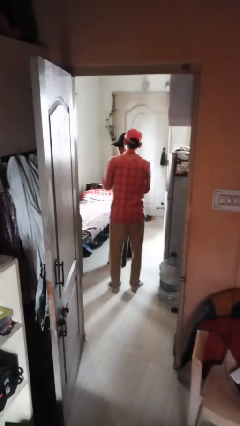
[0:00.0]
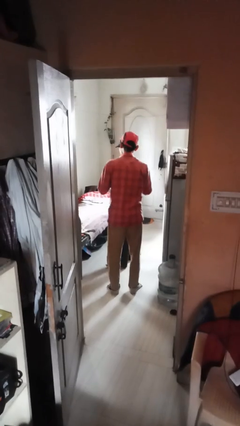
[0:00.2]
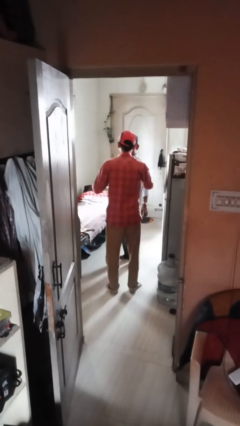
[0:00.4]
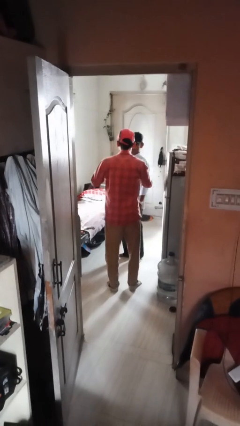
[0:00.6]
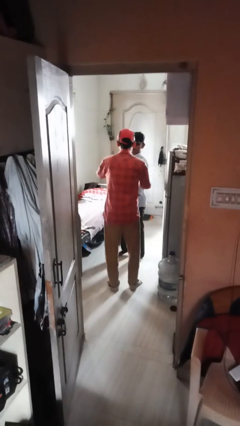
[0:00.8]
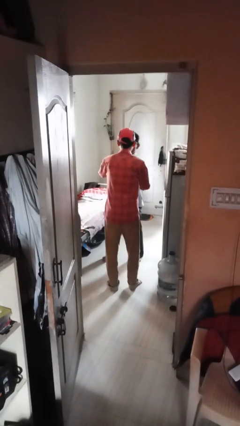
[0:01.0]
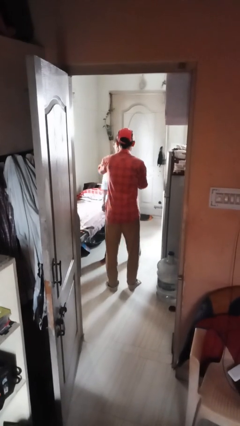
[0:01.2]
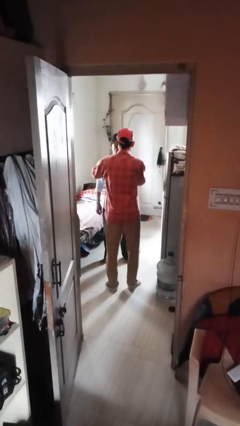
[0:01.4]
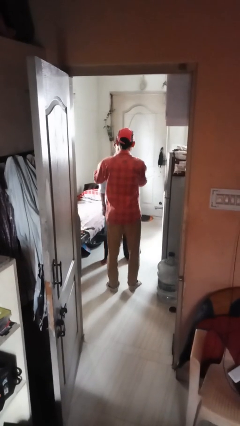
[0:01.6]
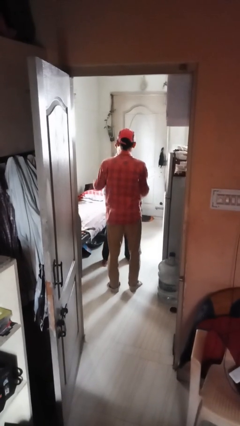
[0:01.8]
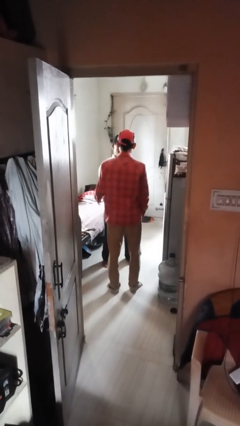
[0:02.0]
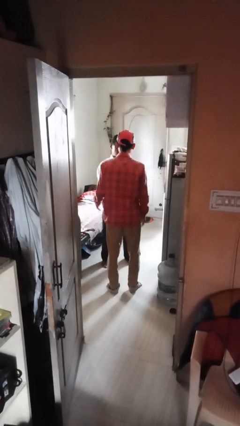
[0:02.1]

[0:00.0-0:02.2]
person grabs person by shoulder

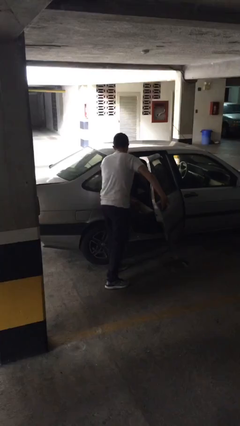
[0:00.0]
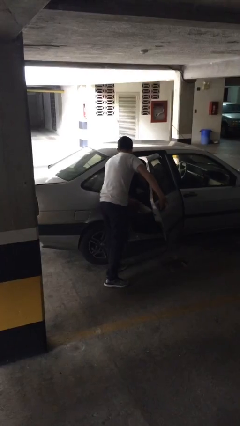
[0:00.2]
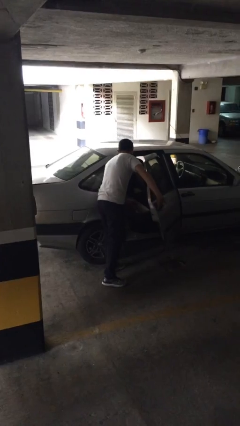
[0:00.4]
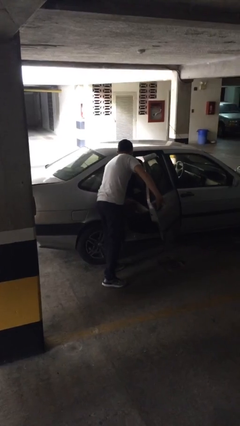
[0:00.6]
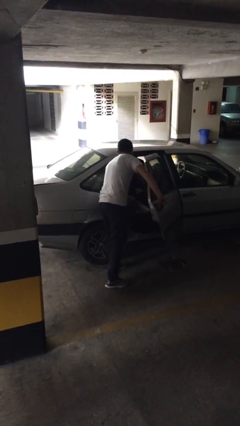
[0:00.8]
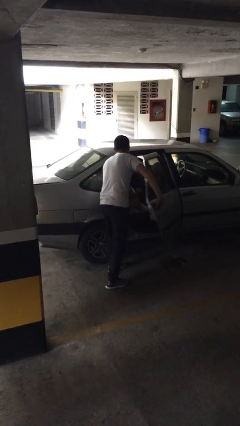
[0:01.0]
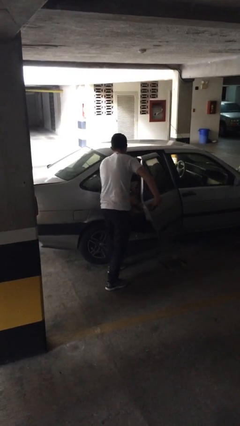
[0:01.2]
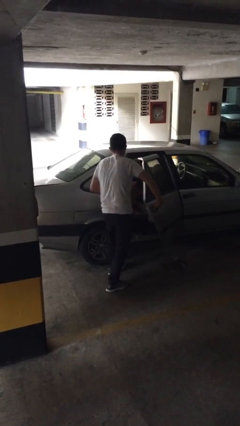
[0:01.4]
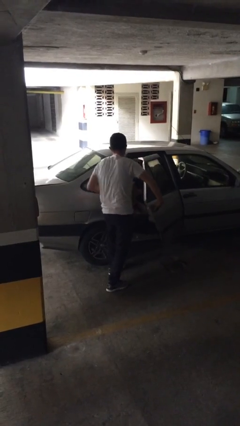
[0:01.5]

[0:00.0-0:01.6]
person unloads car

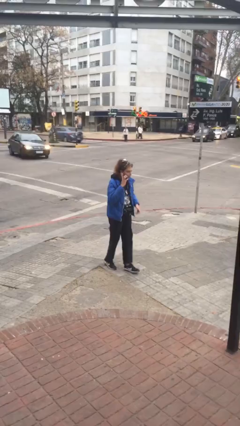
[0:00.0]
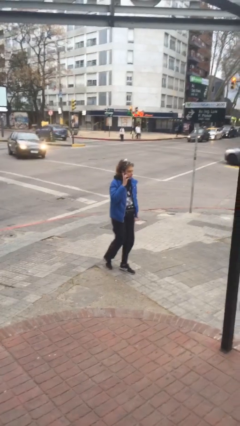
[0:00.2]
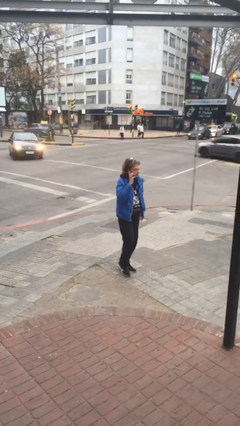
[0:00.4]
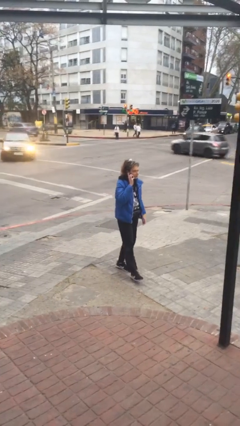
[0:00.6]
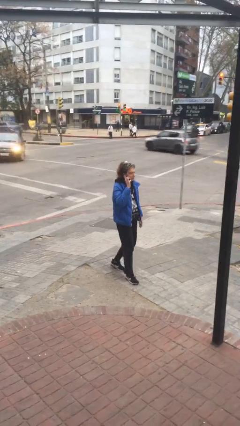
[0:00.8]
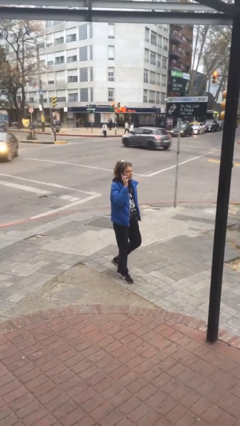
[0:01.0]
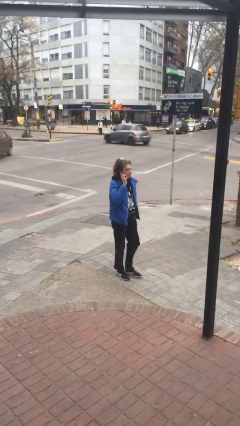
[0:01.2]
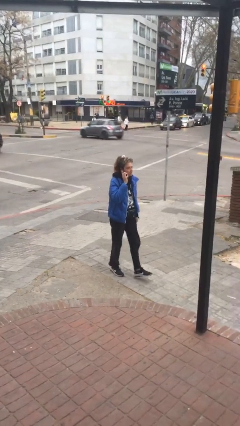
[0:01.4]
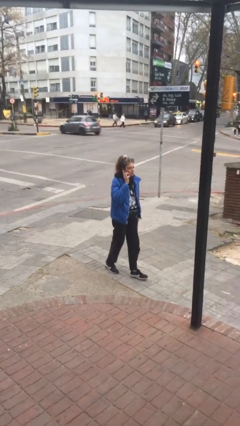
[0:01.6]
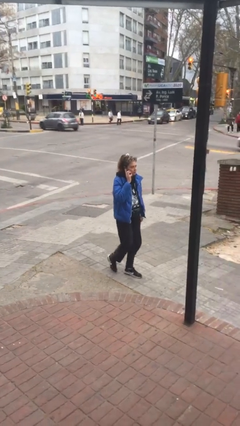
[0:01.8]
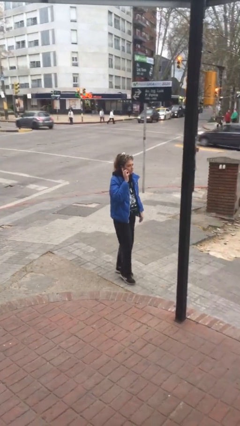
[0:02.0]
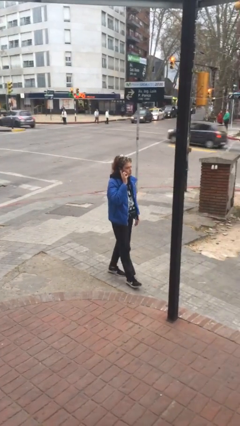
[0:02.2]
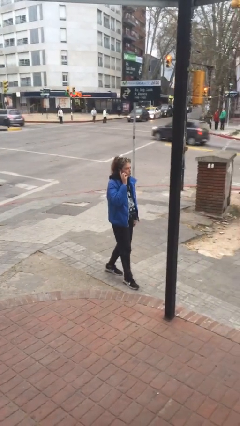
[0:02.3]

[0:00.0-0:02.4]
person talks on phone

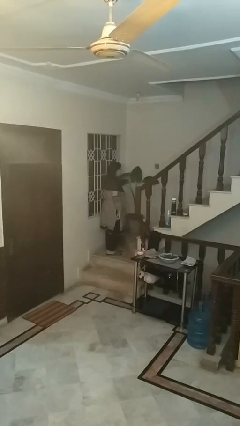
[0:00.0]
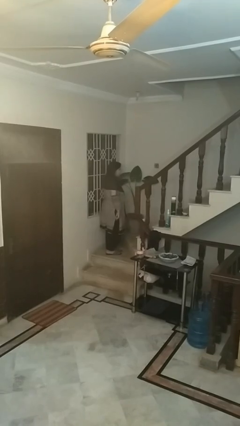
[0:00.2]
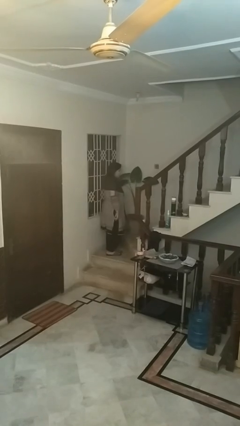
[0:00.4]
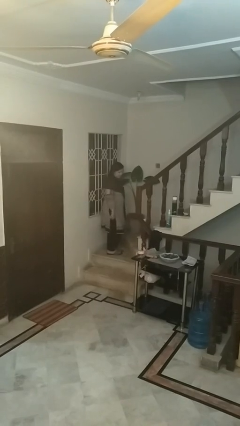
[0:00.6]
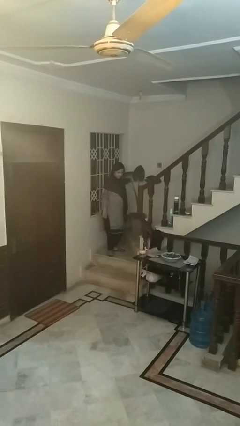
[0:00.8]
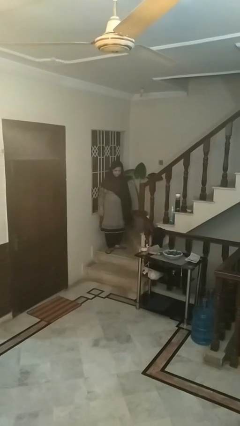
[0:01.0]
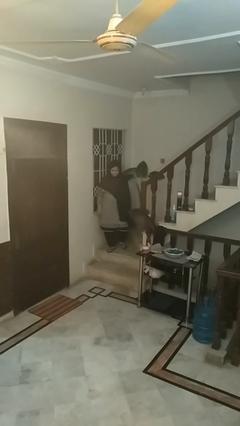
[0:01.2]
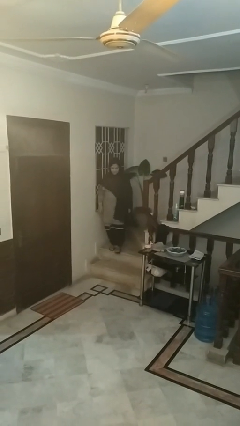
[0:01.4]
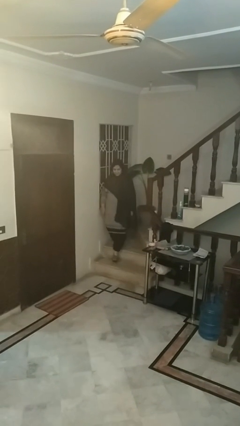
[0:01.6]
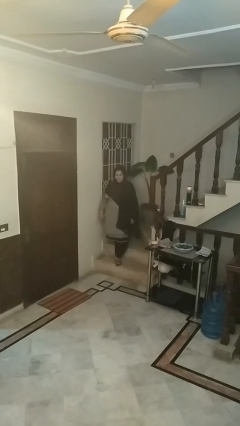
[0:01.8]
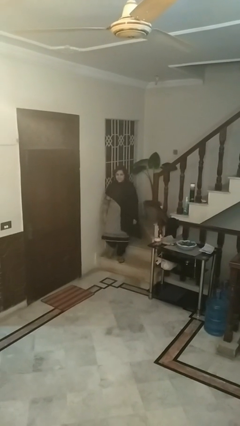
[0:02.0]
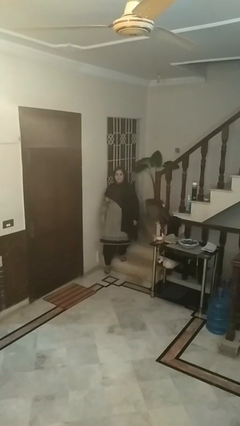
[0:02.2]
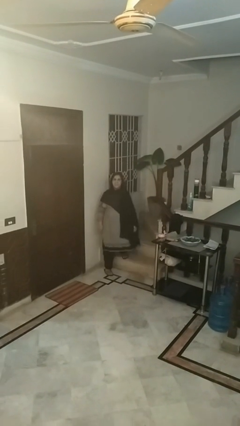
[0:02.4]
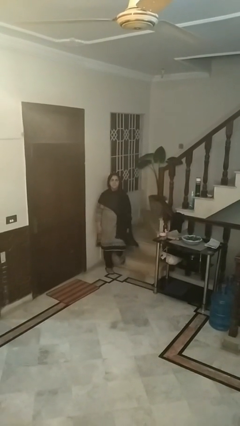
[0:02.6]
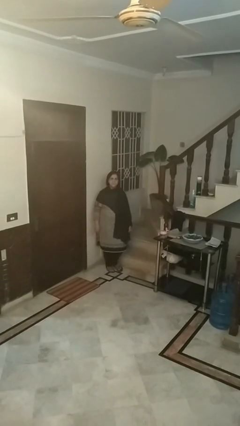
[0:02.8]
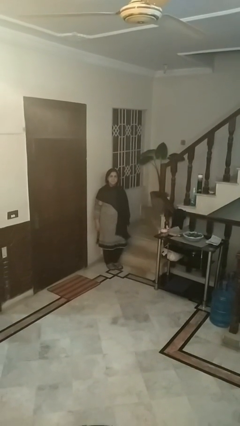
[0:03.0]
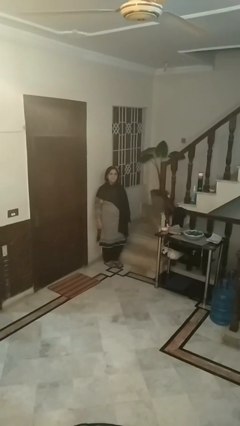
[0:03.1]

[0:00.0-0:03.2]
person climbs down stairs

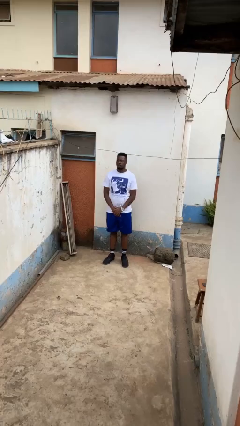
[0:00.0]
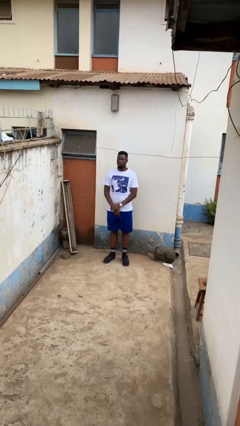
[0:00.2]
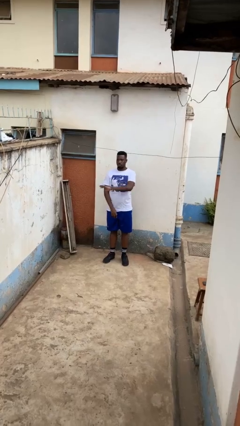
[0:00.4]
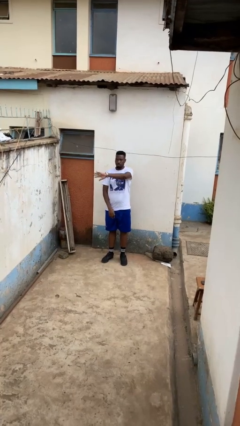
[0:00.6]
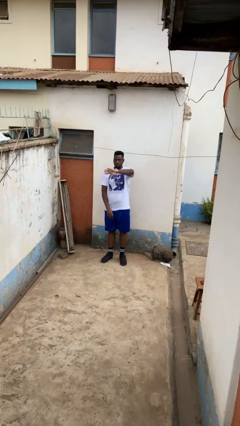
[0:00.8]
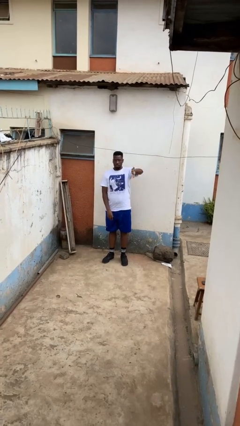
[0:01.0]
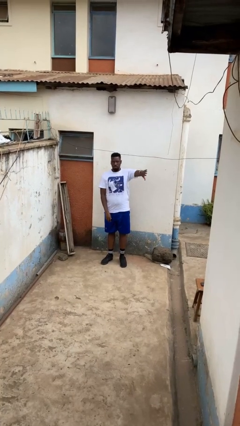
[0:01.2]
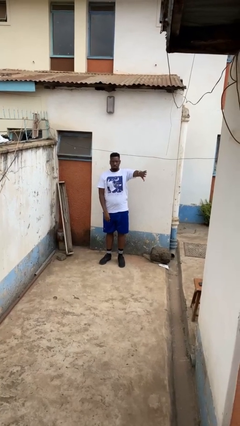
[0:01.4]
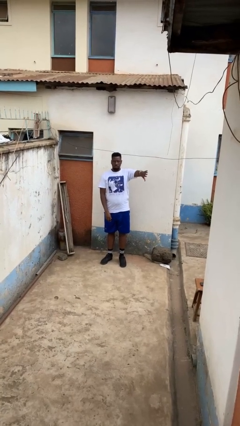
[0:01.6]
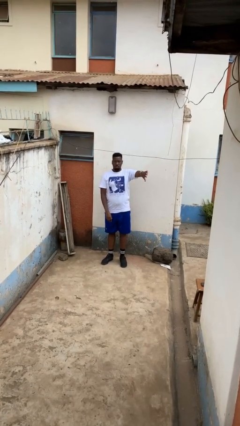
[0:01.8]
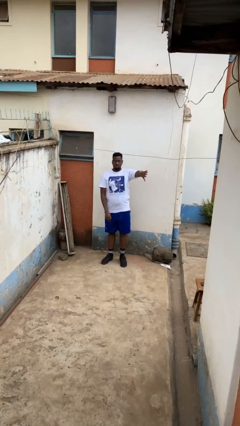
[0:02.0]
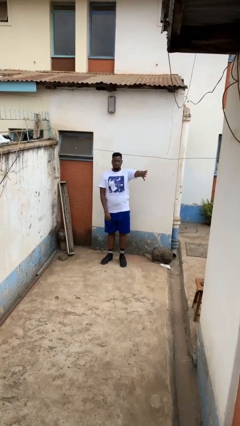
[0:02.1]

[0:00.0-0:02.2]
person gestures swipe left

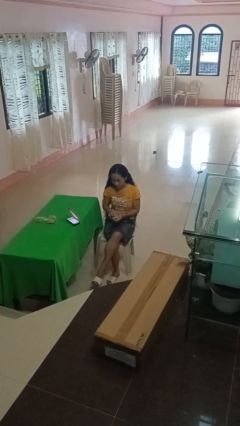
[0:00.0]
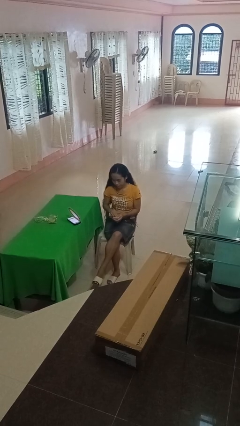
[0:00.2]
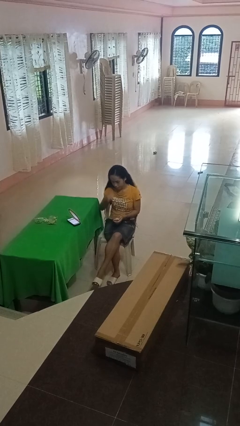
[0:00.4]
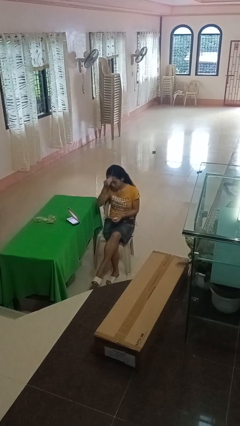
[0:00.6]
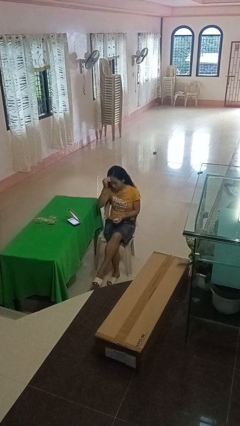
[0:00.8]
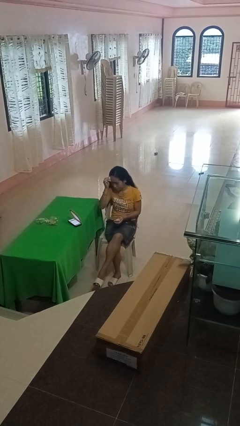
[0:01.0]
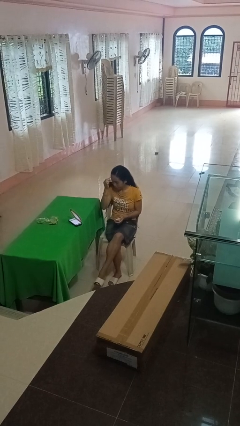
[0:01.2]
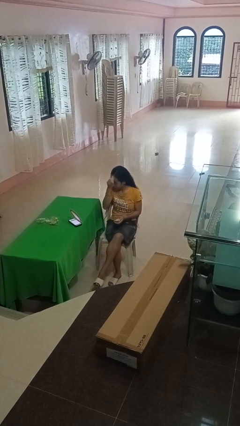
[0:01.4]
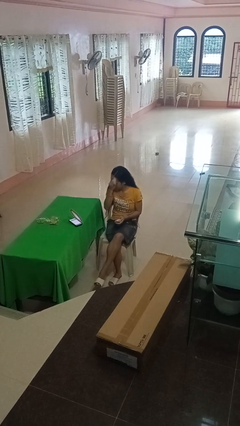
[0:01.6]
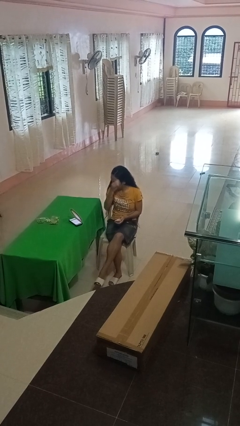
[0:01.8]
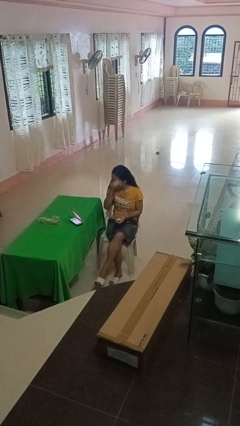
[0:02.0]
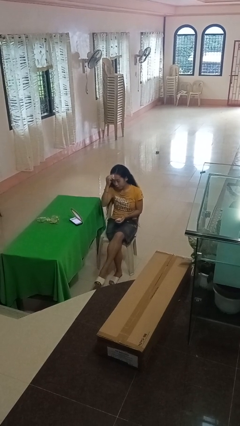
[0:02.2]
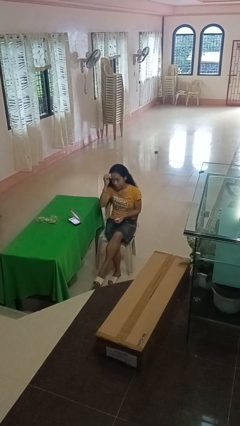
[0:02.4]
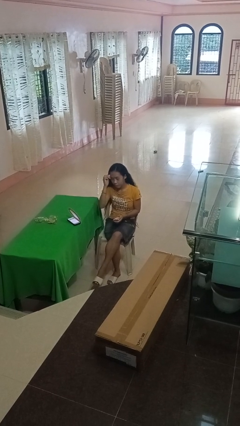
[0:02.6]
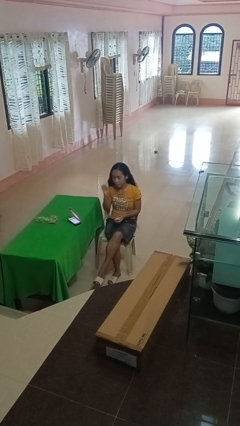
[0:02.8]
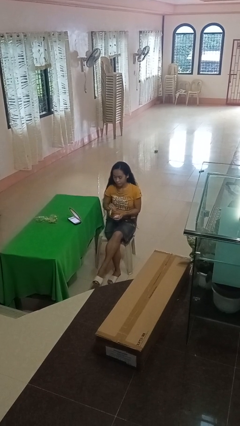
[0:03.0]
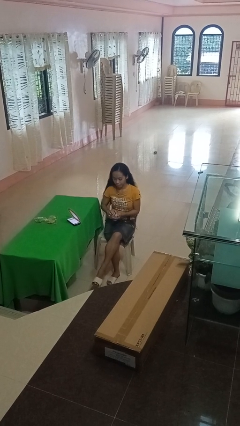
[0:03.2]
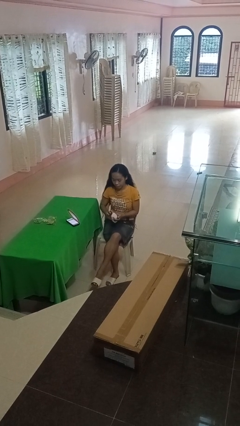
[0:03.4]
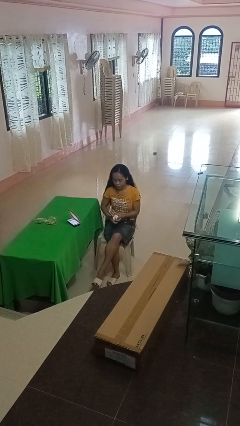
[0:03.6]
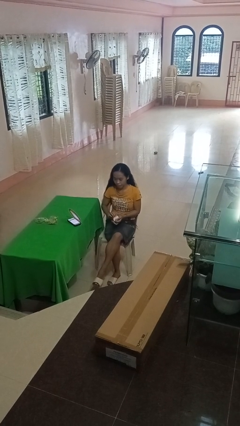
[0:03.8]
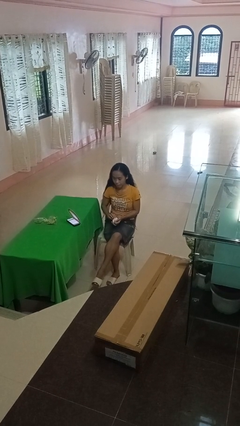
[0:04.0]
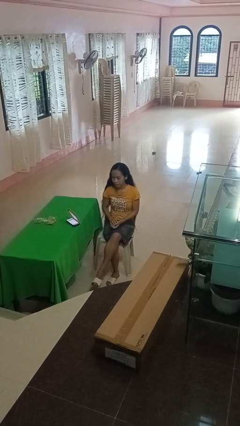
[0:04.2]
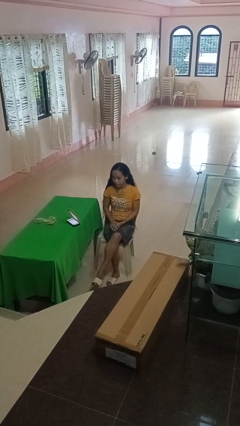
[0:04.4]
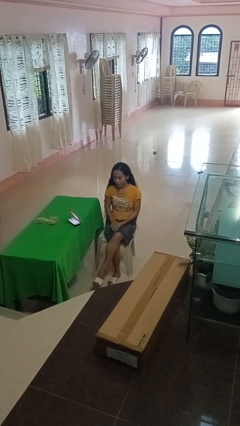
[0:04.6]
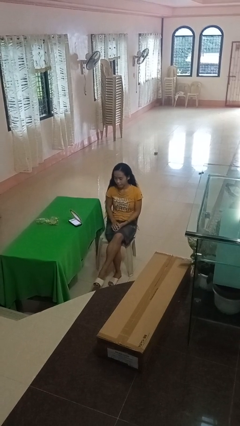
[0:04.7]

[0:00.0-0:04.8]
person applies foundation makeup

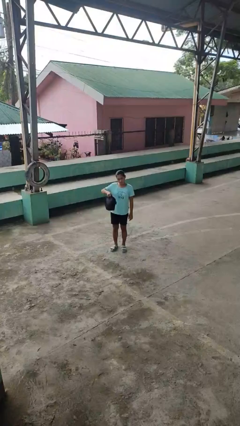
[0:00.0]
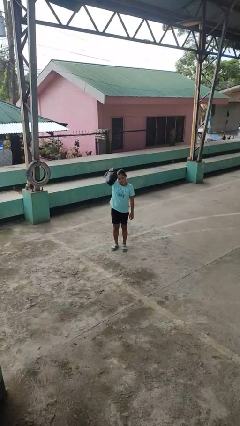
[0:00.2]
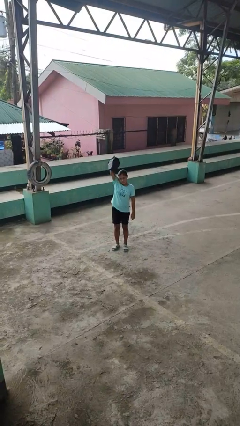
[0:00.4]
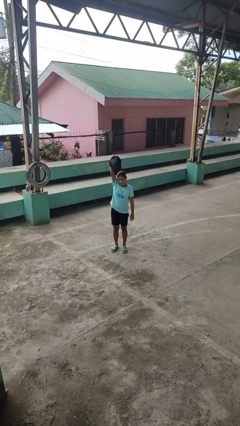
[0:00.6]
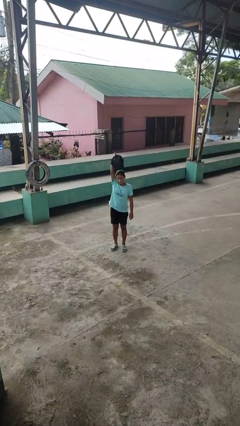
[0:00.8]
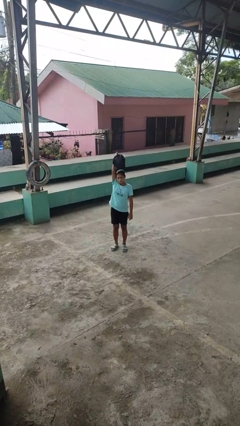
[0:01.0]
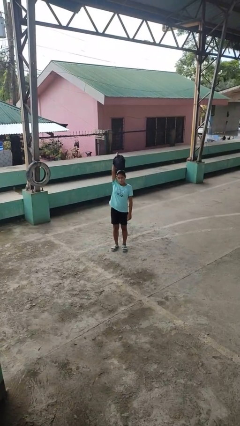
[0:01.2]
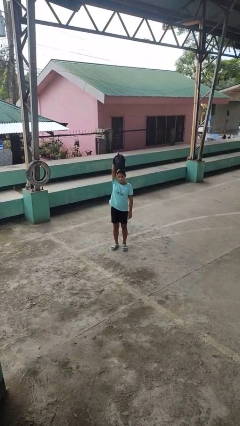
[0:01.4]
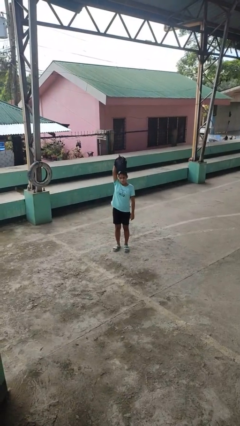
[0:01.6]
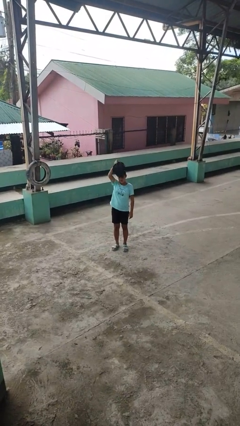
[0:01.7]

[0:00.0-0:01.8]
person holds object above head
